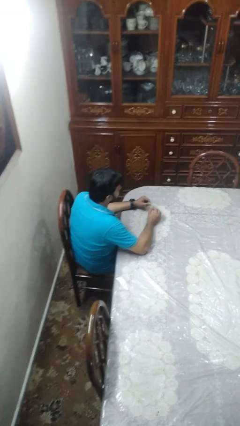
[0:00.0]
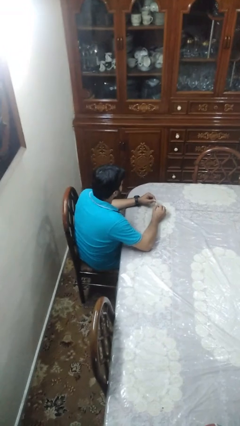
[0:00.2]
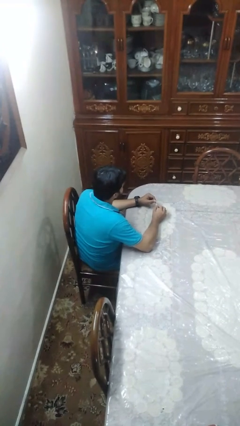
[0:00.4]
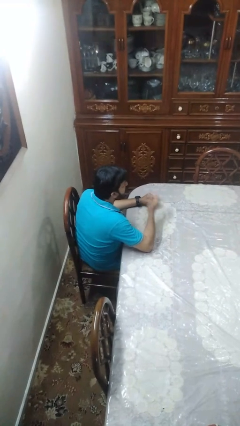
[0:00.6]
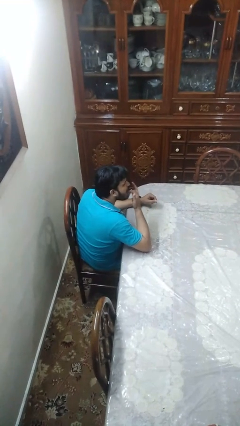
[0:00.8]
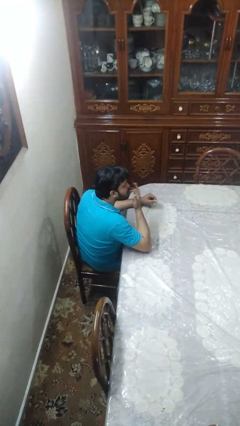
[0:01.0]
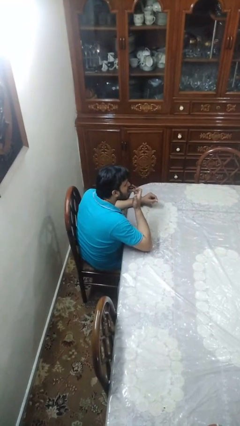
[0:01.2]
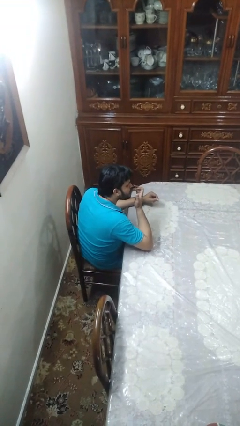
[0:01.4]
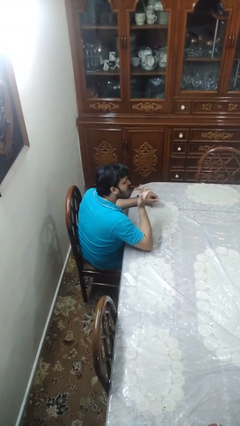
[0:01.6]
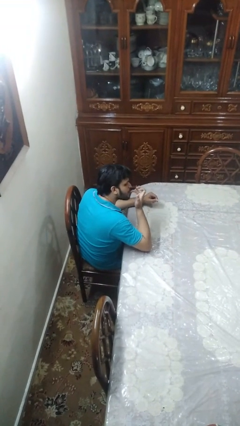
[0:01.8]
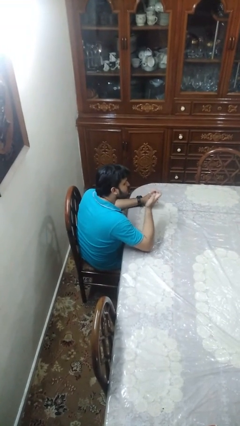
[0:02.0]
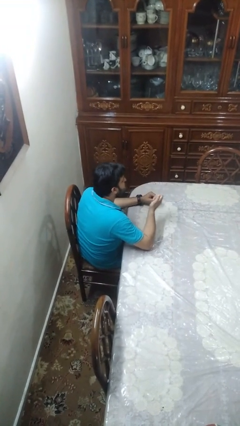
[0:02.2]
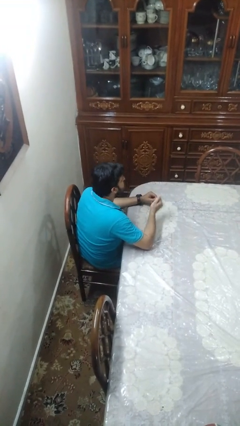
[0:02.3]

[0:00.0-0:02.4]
person licks fingers

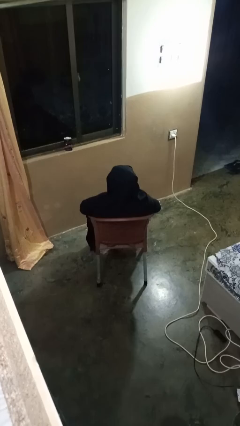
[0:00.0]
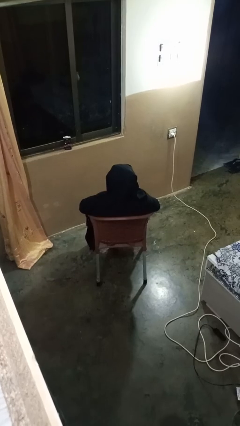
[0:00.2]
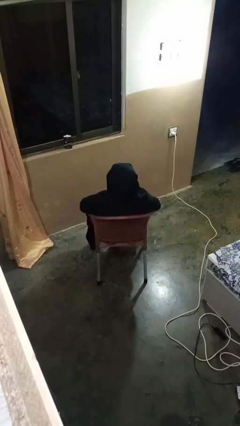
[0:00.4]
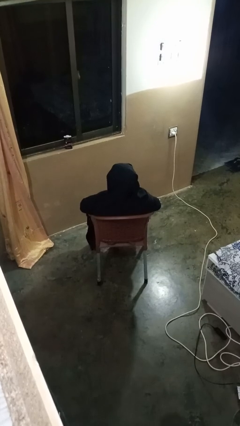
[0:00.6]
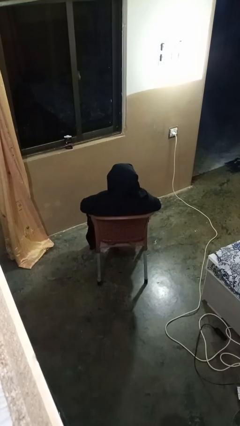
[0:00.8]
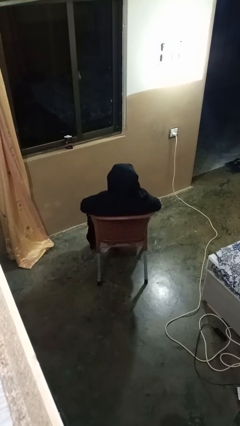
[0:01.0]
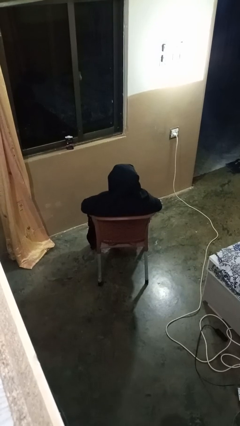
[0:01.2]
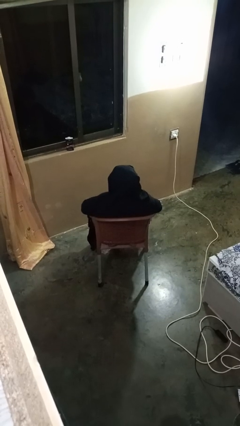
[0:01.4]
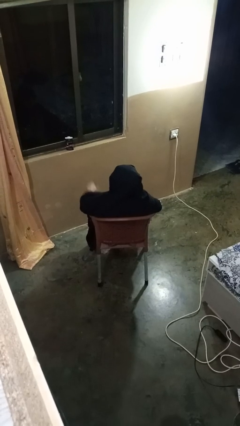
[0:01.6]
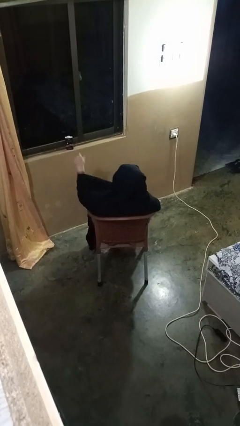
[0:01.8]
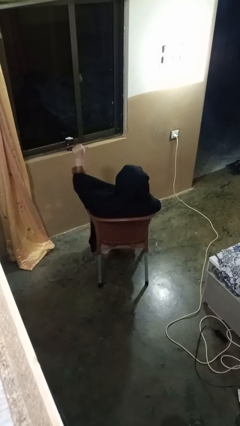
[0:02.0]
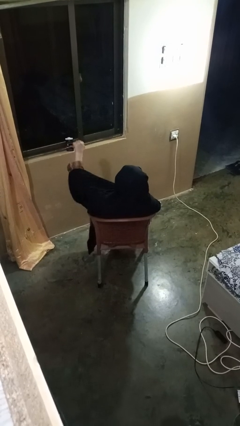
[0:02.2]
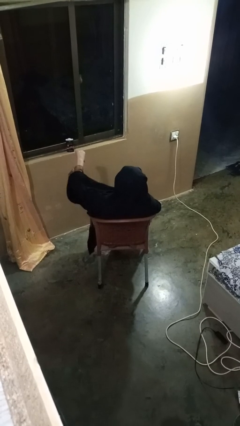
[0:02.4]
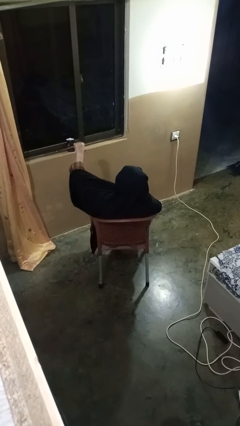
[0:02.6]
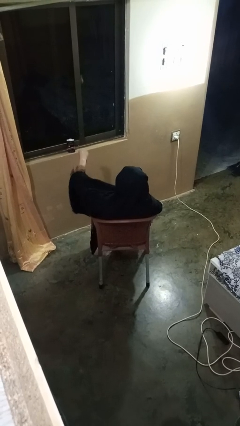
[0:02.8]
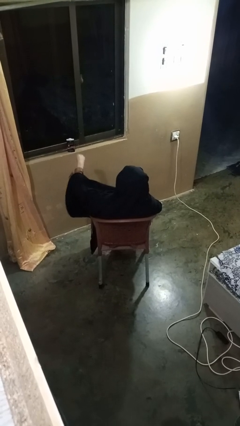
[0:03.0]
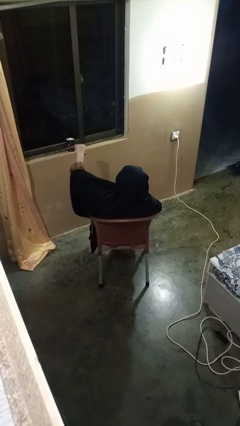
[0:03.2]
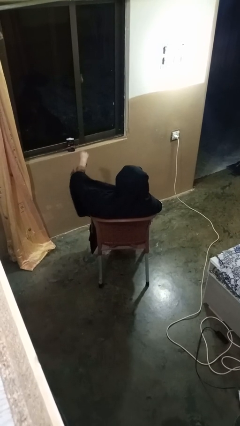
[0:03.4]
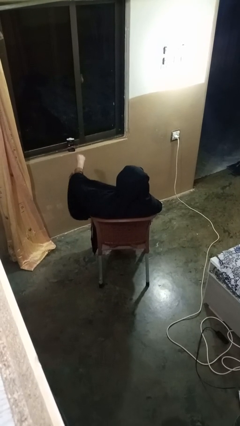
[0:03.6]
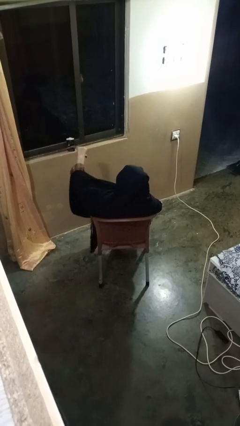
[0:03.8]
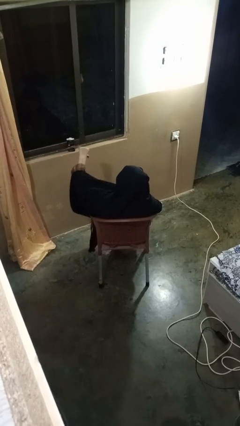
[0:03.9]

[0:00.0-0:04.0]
person gestures thumbs down

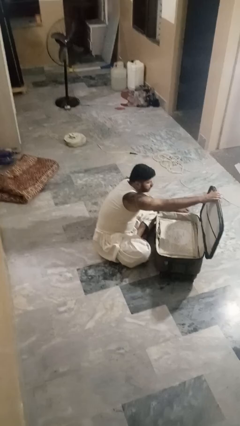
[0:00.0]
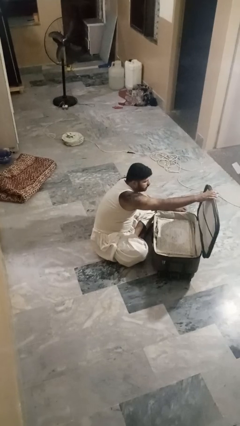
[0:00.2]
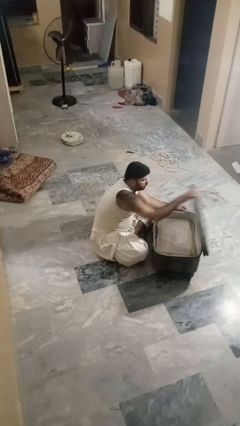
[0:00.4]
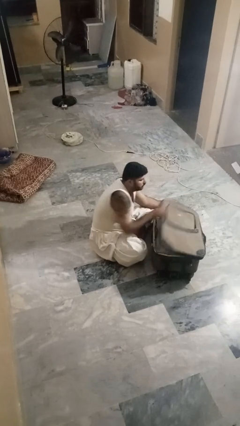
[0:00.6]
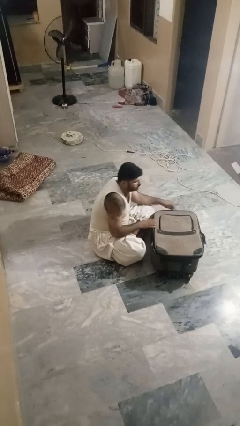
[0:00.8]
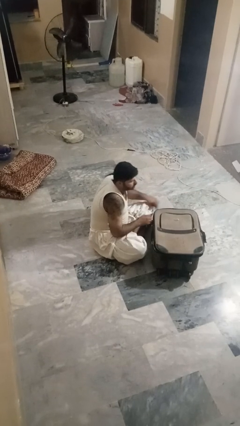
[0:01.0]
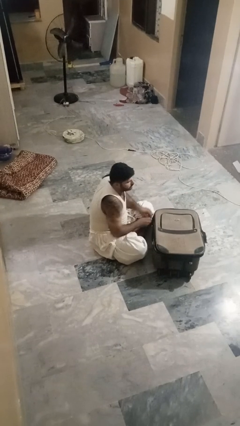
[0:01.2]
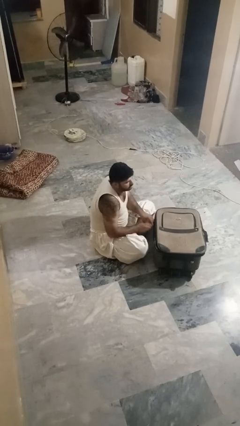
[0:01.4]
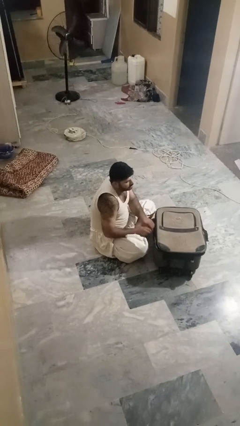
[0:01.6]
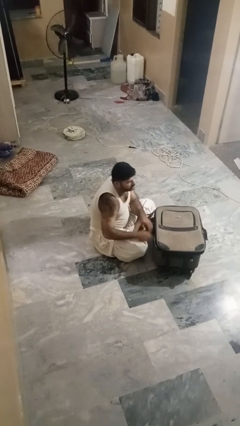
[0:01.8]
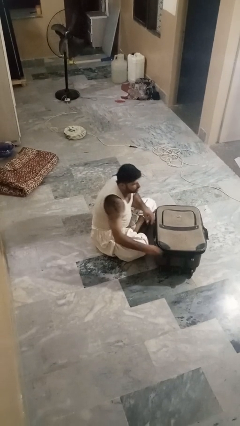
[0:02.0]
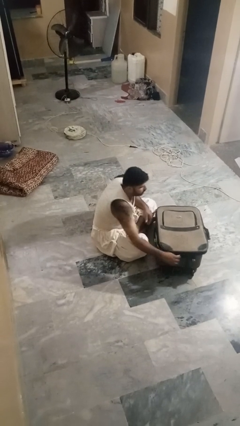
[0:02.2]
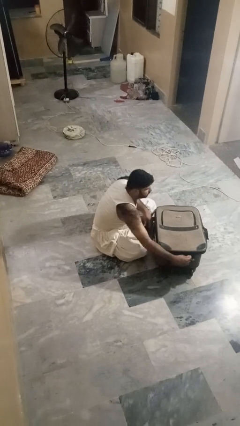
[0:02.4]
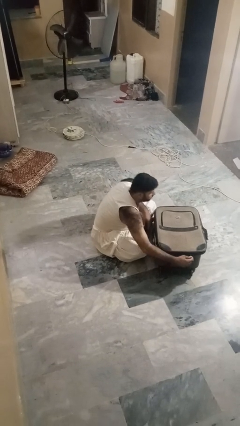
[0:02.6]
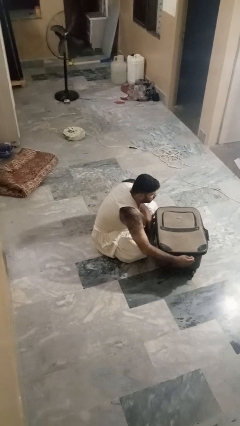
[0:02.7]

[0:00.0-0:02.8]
person closes suitcase

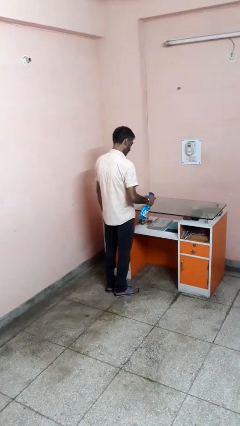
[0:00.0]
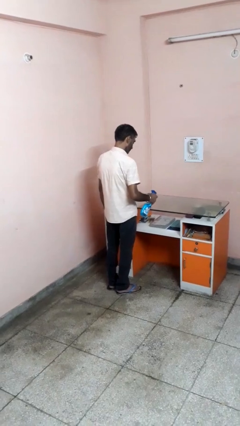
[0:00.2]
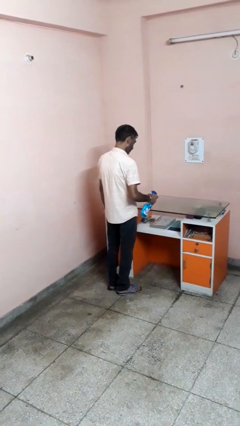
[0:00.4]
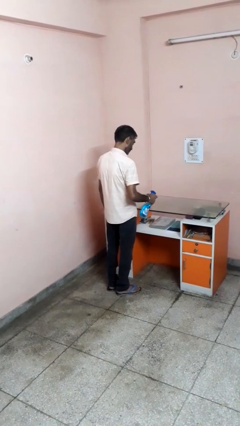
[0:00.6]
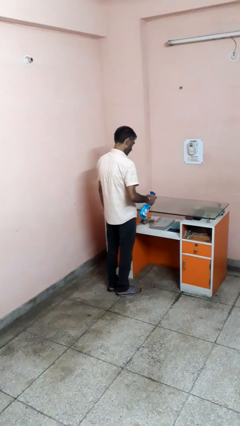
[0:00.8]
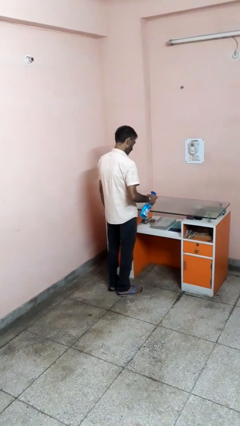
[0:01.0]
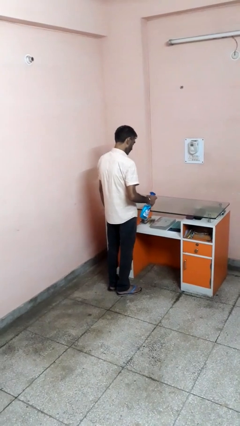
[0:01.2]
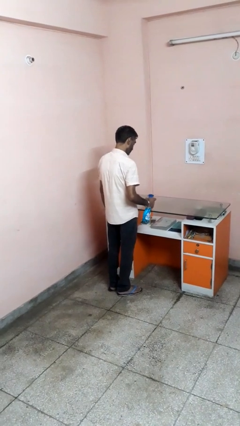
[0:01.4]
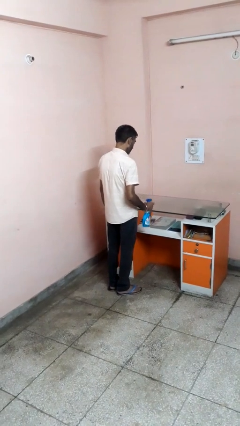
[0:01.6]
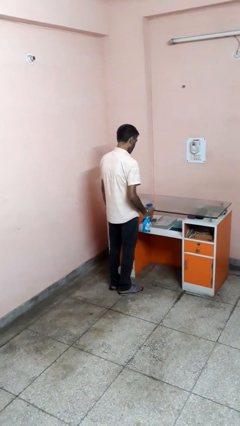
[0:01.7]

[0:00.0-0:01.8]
person sprays from bottle

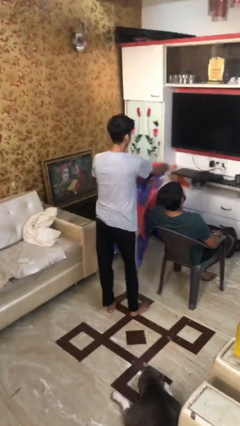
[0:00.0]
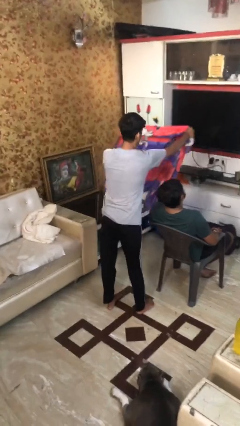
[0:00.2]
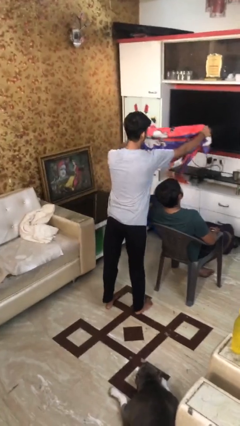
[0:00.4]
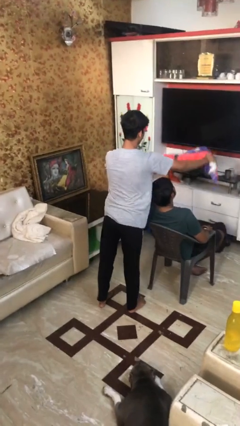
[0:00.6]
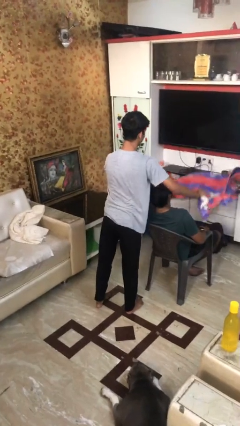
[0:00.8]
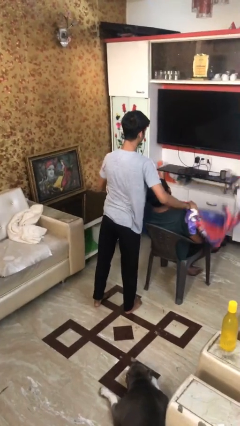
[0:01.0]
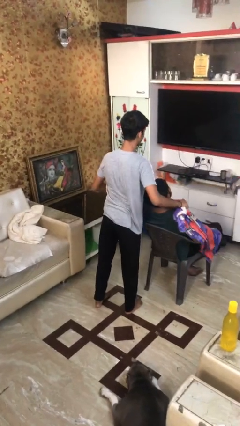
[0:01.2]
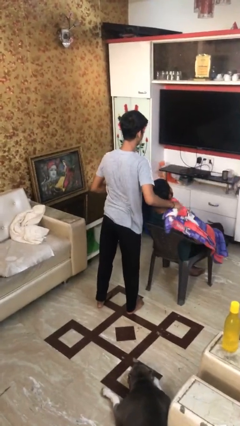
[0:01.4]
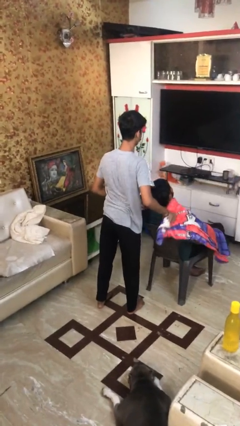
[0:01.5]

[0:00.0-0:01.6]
person covers friend with blanket

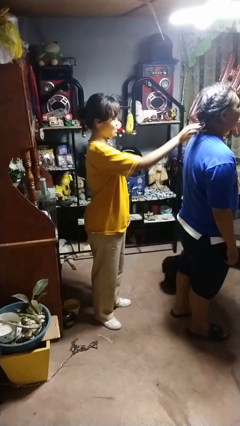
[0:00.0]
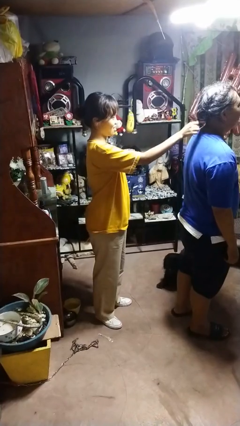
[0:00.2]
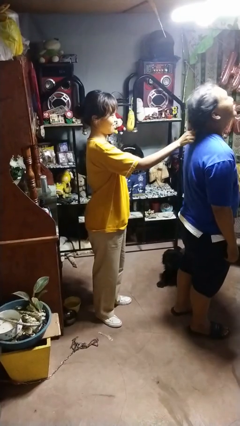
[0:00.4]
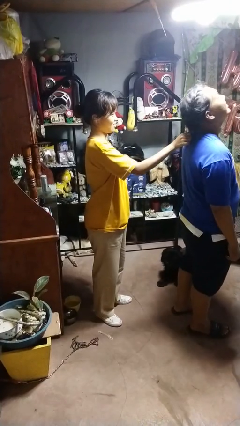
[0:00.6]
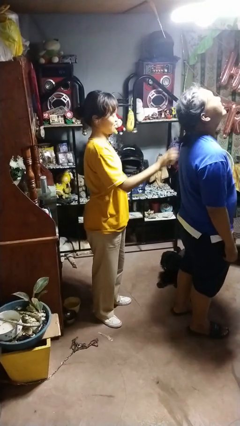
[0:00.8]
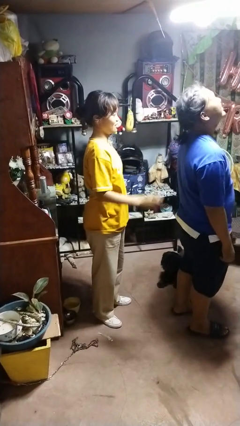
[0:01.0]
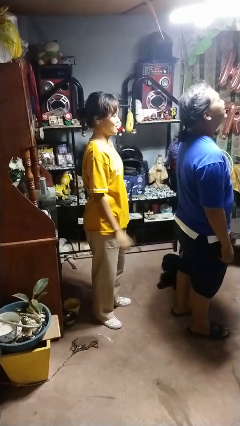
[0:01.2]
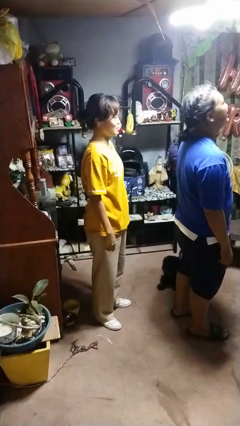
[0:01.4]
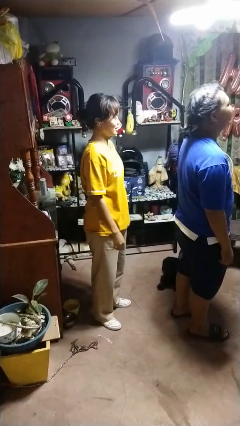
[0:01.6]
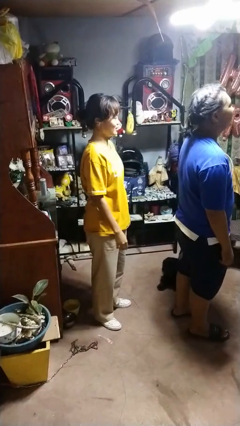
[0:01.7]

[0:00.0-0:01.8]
person grabs person by hair

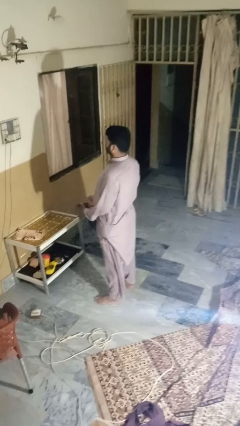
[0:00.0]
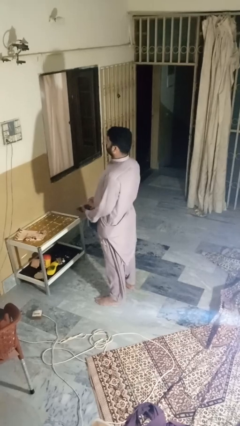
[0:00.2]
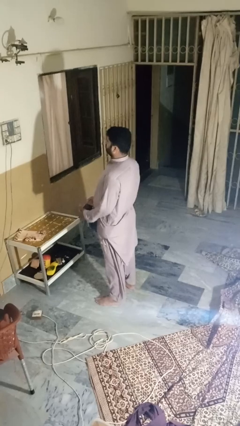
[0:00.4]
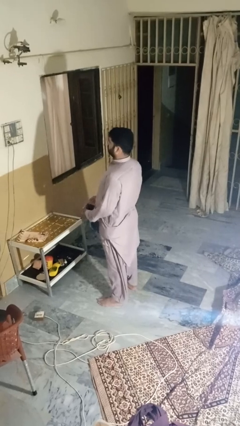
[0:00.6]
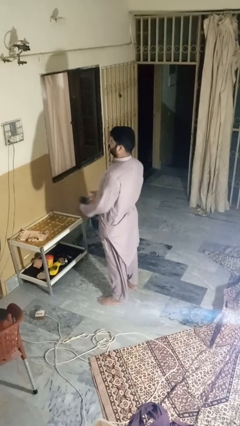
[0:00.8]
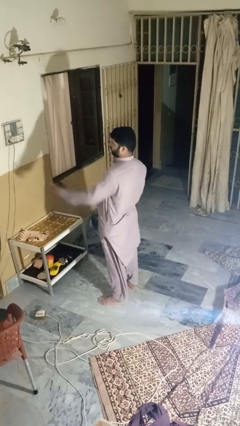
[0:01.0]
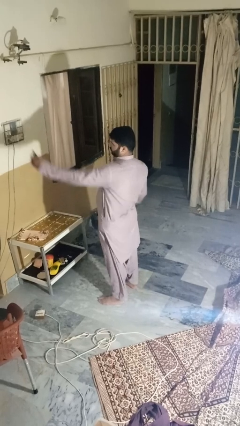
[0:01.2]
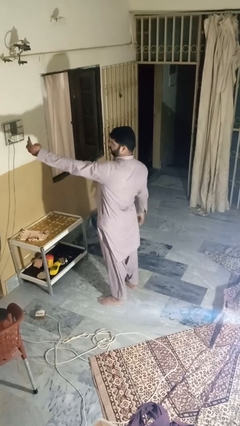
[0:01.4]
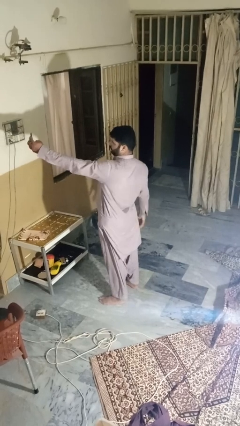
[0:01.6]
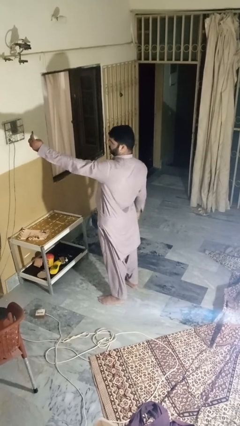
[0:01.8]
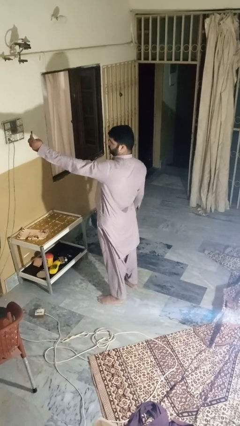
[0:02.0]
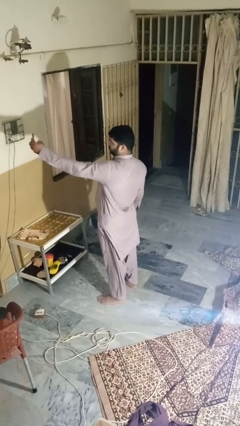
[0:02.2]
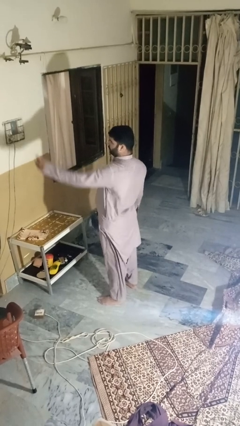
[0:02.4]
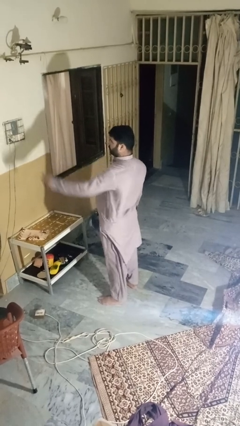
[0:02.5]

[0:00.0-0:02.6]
person takes selfie

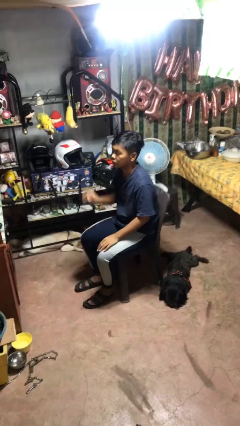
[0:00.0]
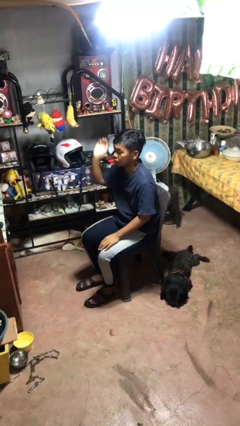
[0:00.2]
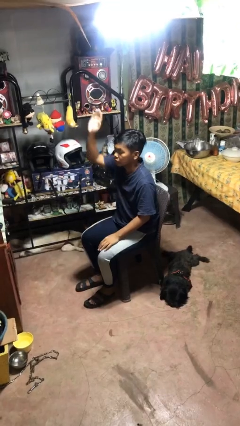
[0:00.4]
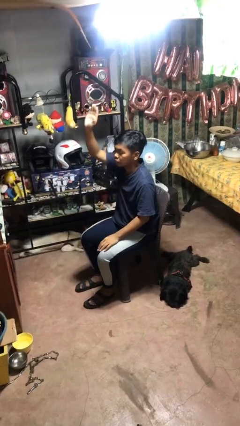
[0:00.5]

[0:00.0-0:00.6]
person gestures raise hand
